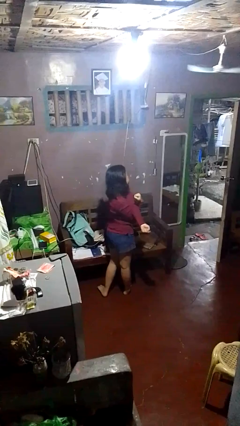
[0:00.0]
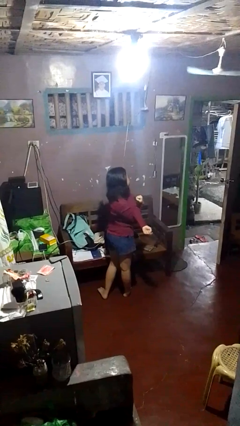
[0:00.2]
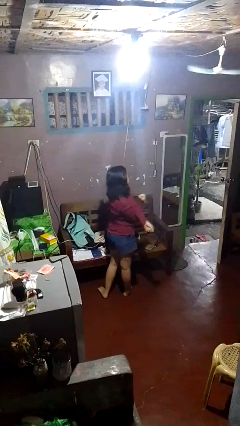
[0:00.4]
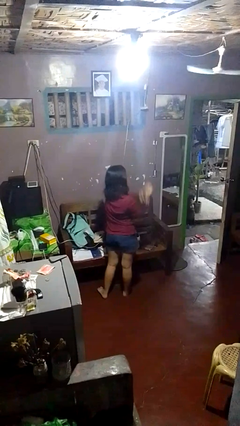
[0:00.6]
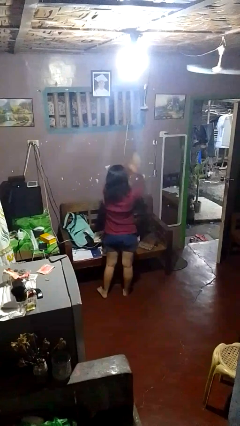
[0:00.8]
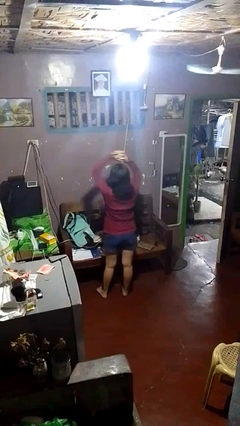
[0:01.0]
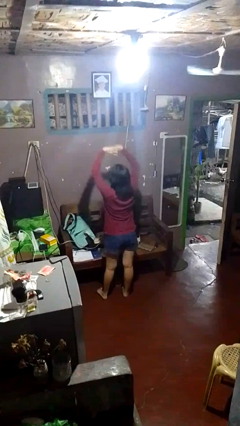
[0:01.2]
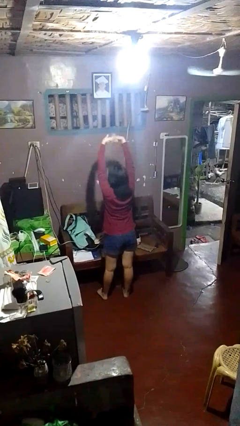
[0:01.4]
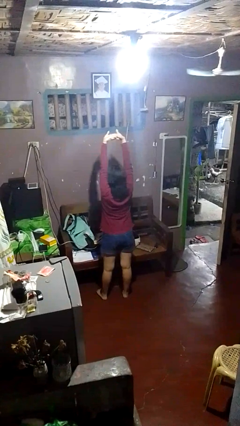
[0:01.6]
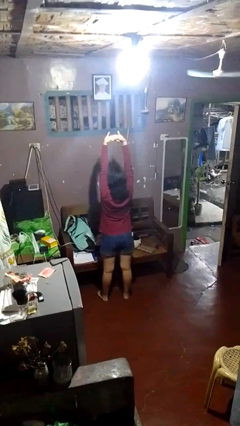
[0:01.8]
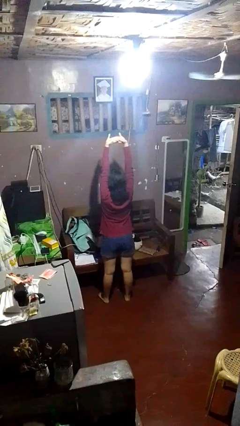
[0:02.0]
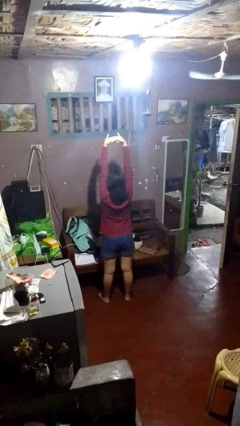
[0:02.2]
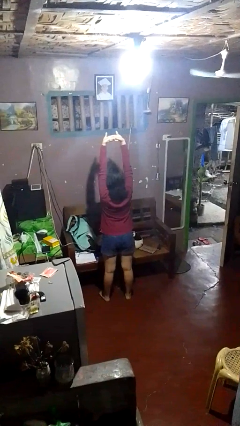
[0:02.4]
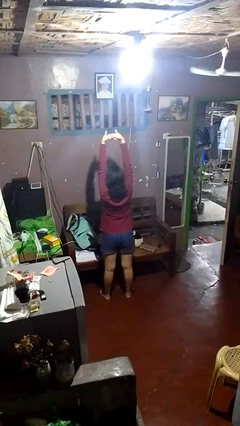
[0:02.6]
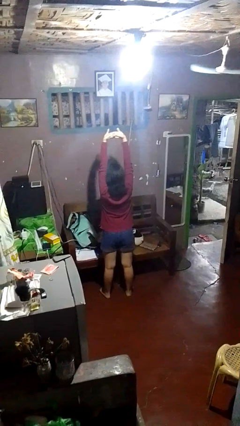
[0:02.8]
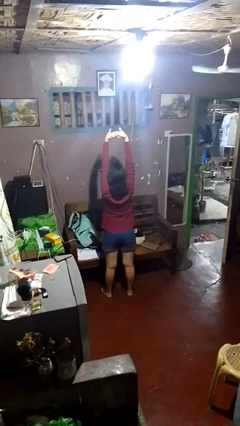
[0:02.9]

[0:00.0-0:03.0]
person stretches arms over head

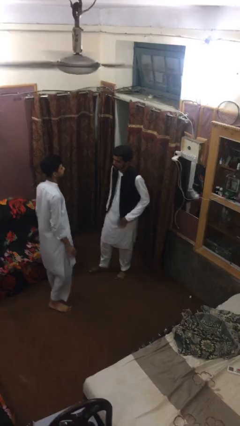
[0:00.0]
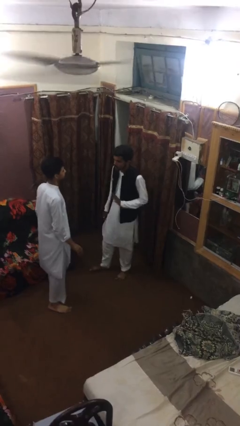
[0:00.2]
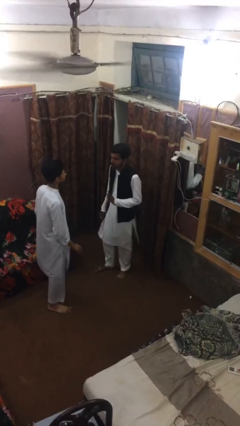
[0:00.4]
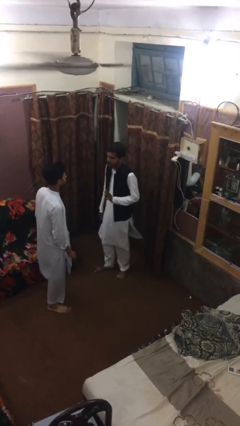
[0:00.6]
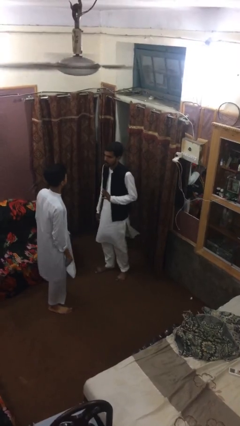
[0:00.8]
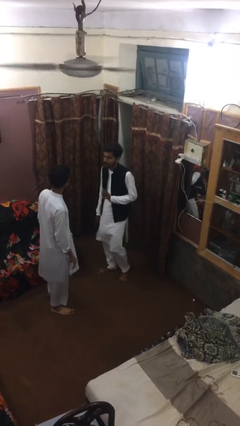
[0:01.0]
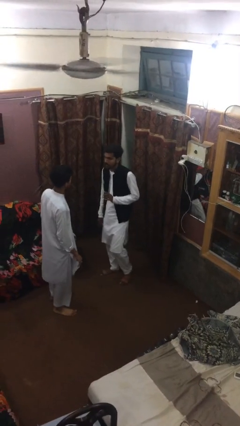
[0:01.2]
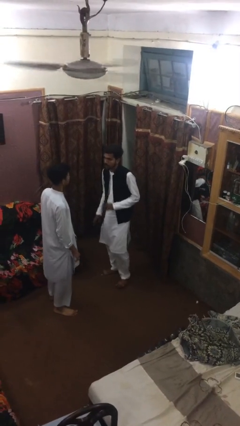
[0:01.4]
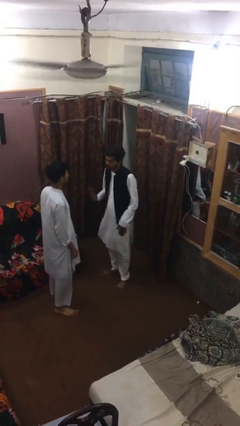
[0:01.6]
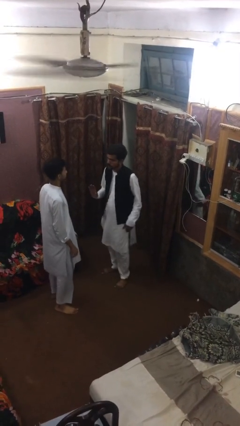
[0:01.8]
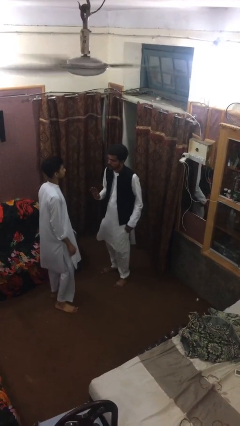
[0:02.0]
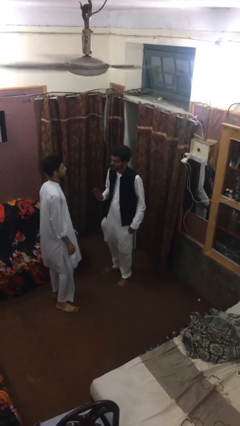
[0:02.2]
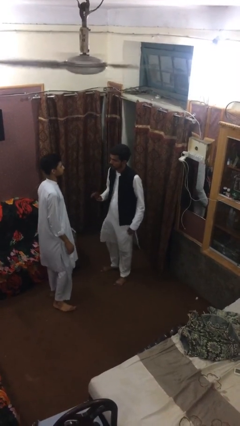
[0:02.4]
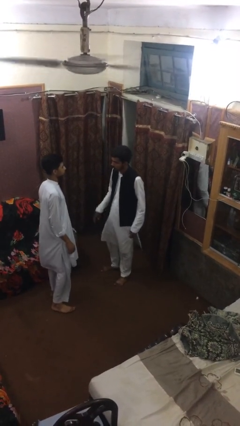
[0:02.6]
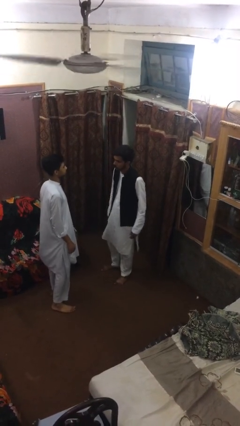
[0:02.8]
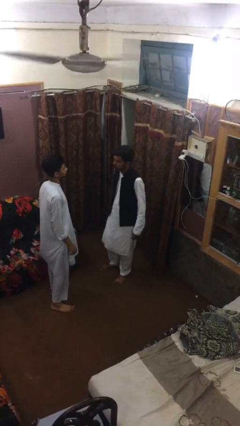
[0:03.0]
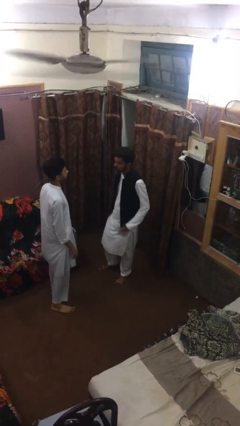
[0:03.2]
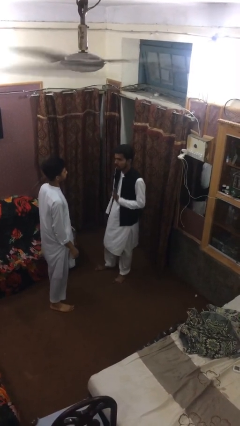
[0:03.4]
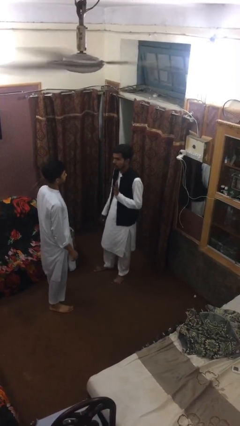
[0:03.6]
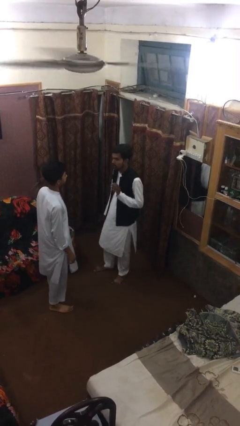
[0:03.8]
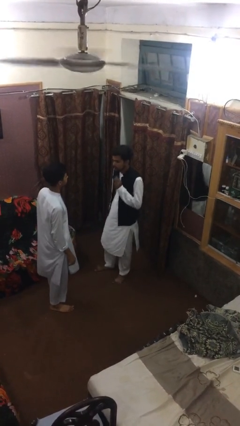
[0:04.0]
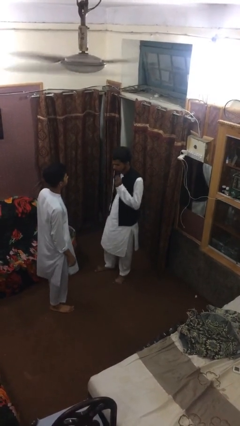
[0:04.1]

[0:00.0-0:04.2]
person talks to person

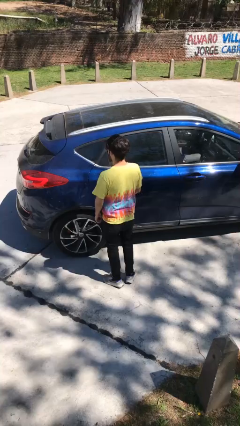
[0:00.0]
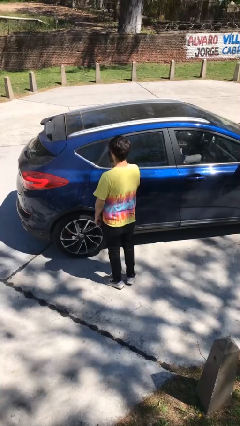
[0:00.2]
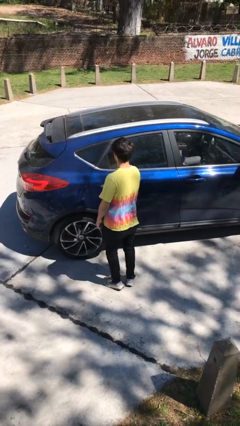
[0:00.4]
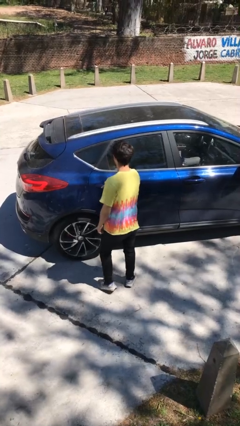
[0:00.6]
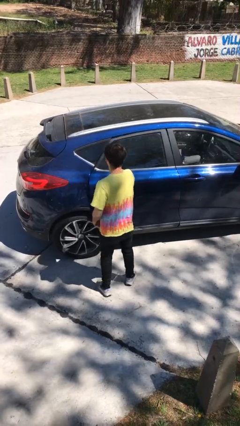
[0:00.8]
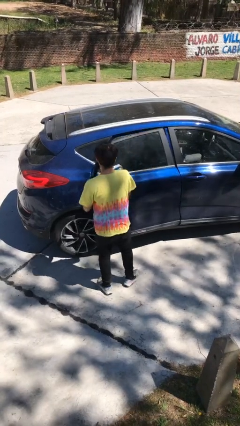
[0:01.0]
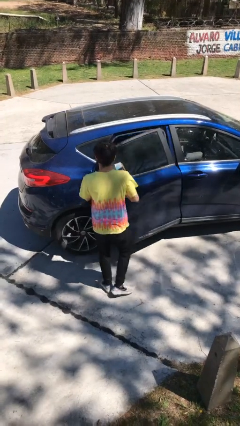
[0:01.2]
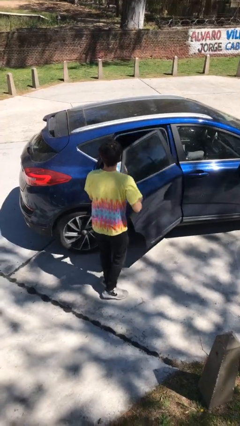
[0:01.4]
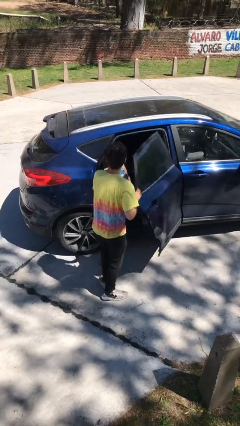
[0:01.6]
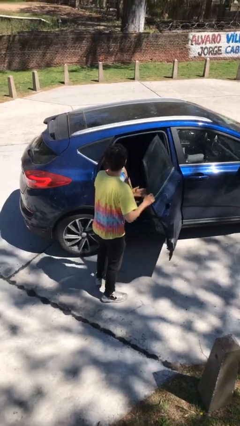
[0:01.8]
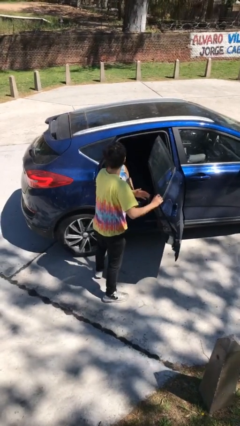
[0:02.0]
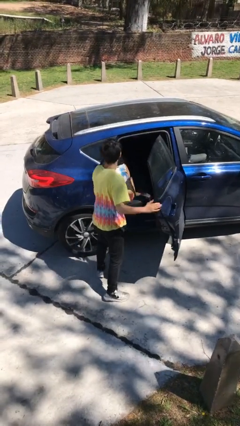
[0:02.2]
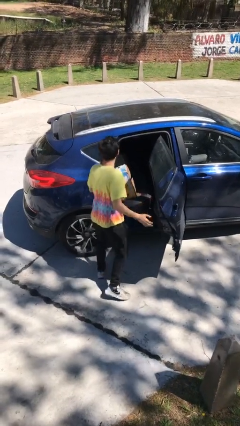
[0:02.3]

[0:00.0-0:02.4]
person opens car door

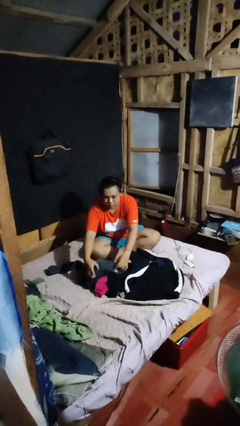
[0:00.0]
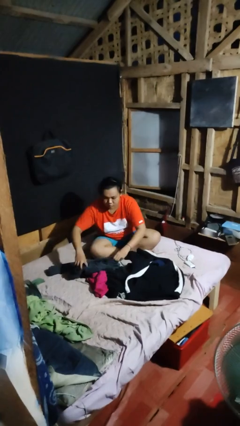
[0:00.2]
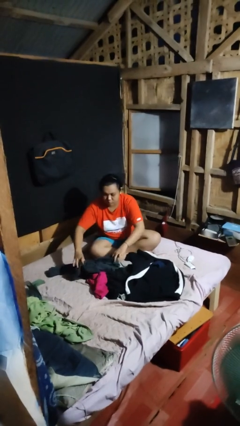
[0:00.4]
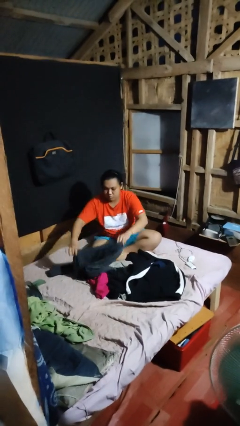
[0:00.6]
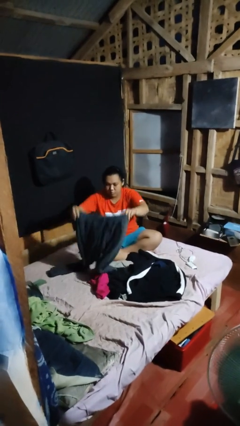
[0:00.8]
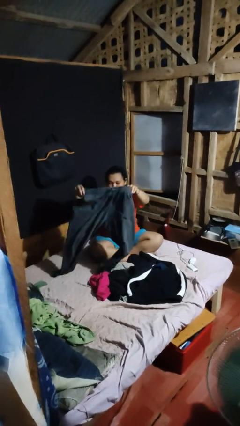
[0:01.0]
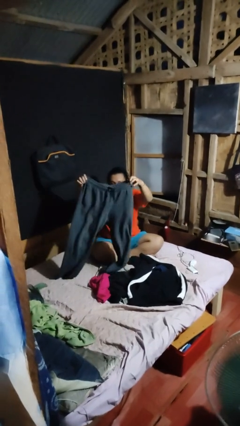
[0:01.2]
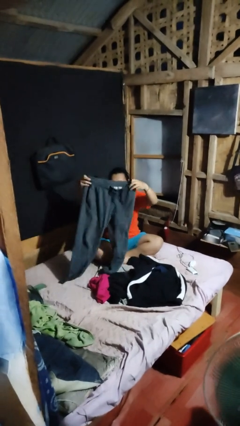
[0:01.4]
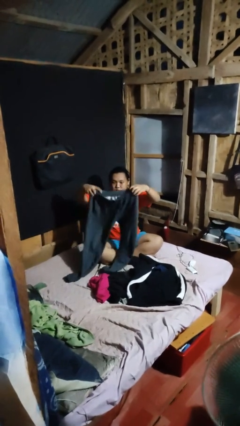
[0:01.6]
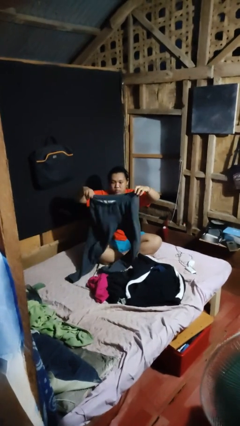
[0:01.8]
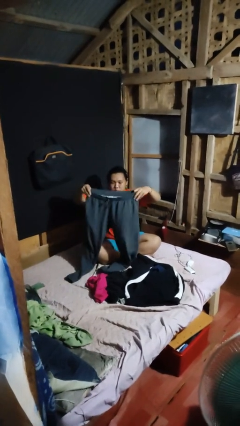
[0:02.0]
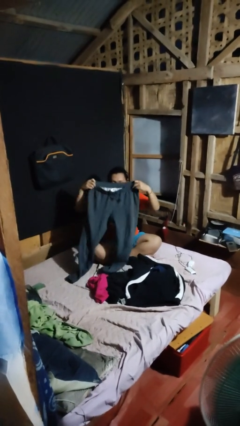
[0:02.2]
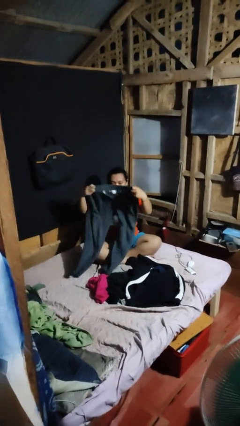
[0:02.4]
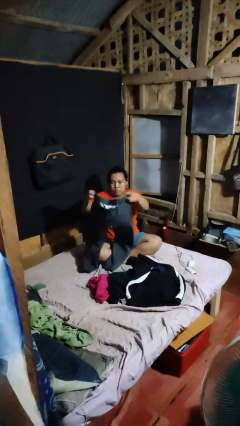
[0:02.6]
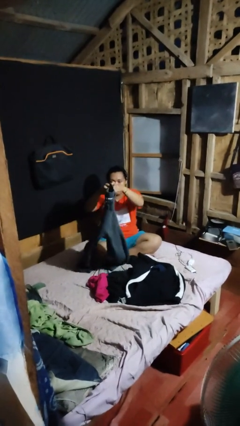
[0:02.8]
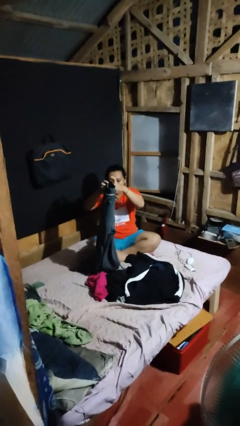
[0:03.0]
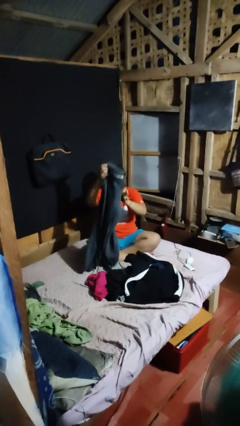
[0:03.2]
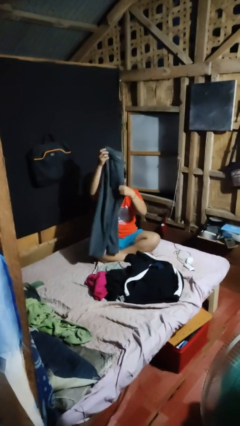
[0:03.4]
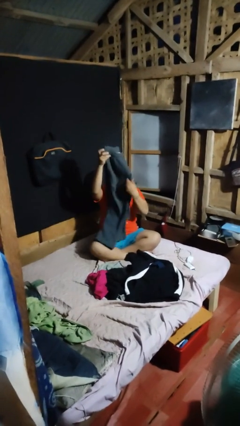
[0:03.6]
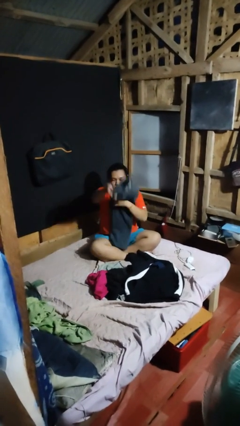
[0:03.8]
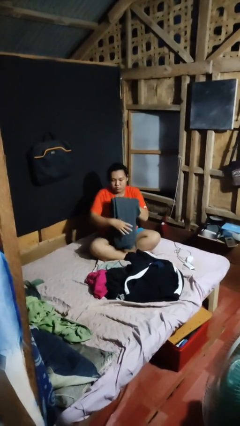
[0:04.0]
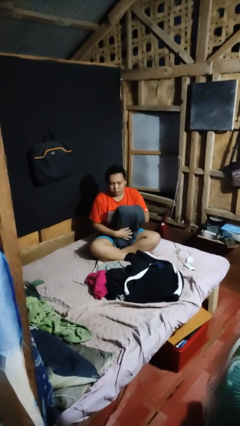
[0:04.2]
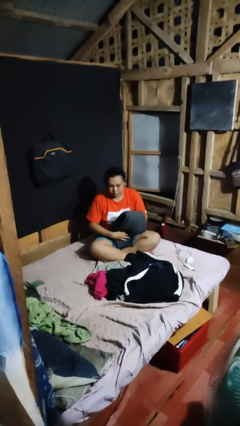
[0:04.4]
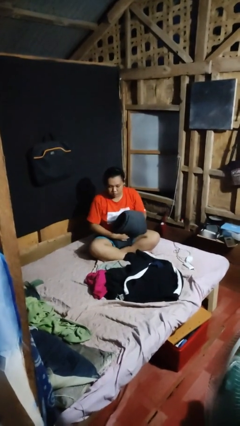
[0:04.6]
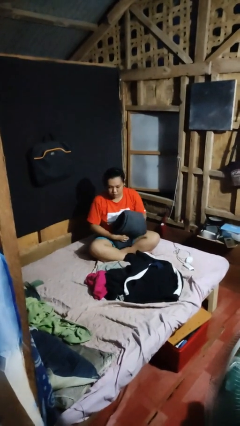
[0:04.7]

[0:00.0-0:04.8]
person folds pants

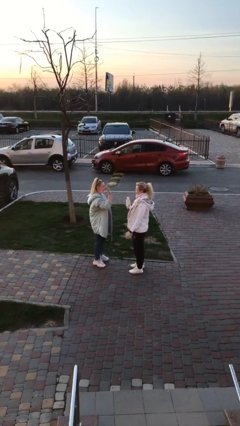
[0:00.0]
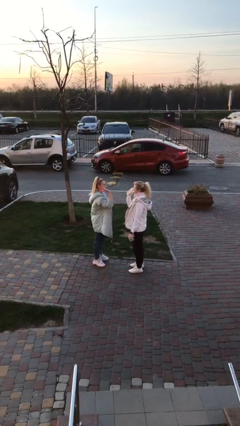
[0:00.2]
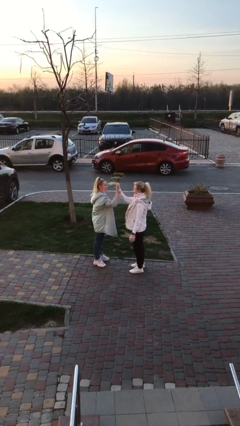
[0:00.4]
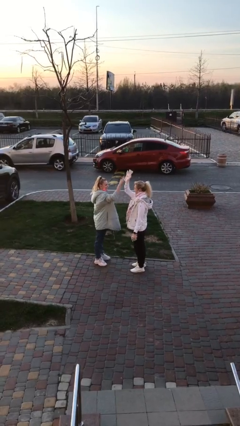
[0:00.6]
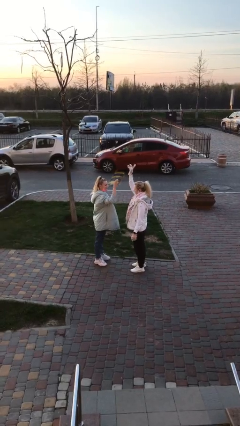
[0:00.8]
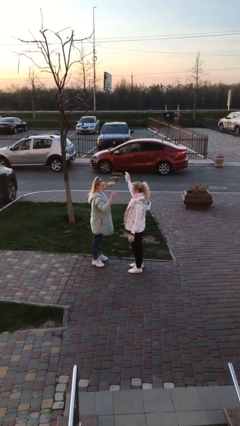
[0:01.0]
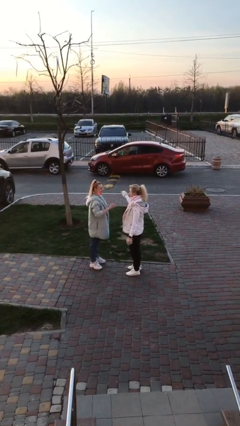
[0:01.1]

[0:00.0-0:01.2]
person highfives hand

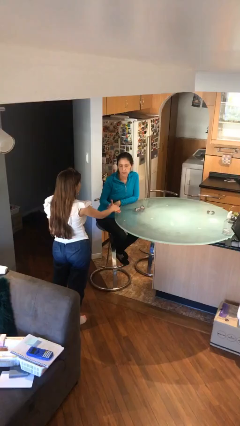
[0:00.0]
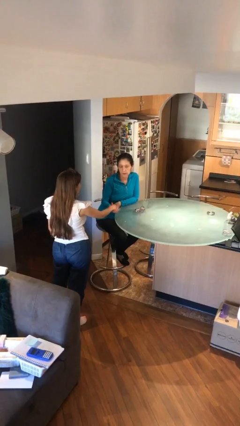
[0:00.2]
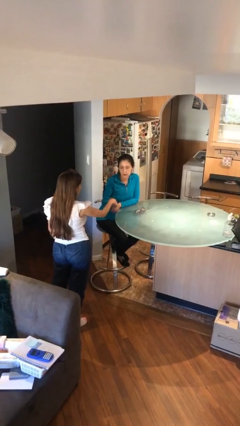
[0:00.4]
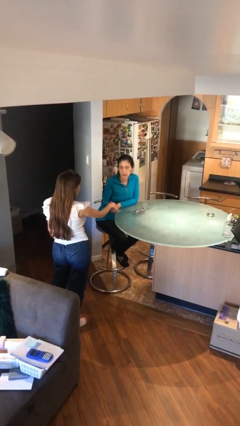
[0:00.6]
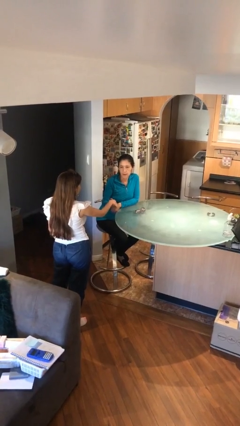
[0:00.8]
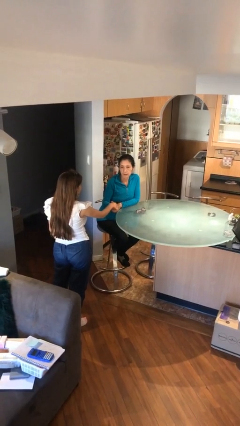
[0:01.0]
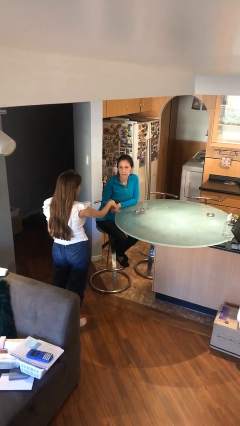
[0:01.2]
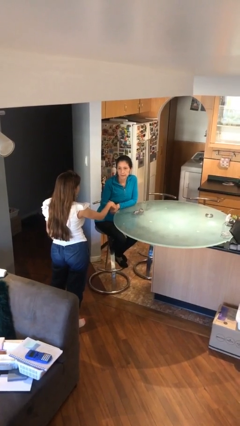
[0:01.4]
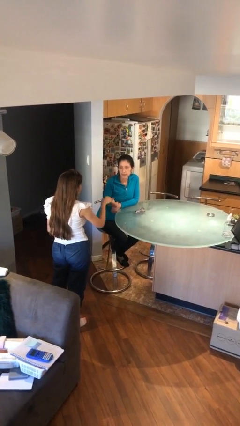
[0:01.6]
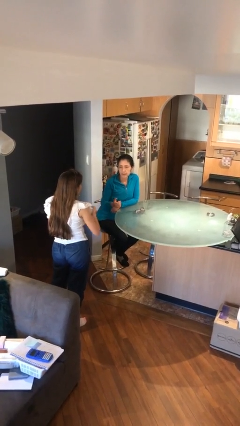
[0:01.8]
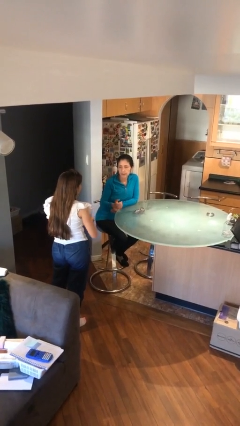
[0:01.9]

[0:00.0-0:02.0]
person shakes hand
